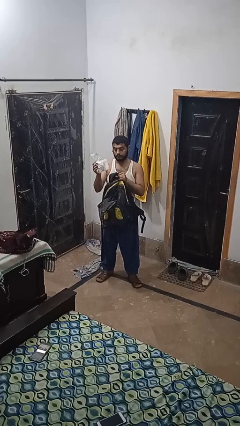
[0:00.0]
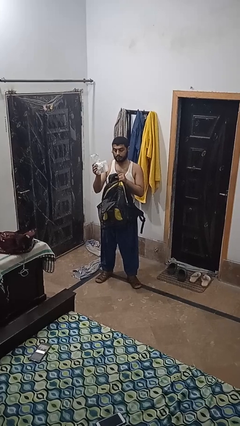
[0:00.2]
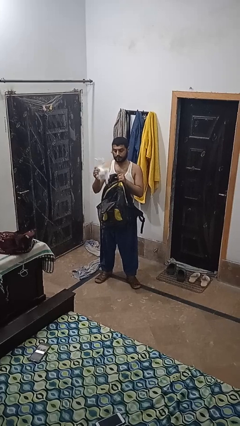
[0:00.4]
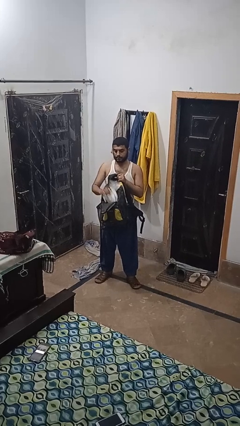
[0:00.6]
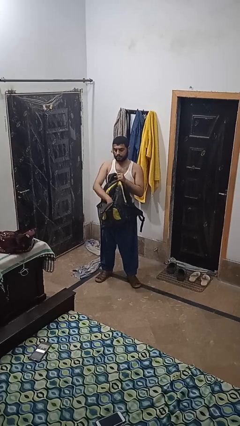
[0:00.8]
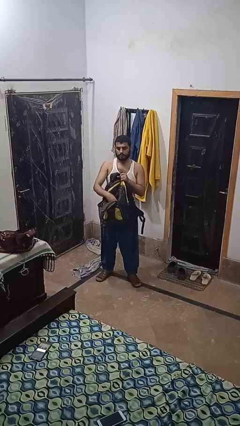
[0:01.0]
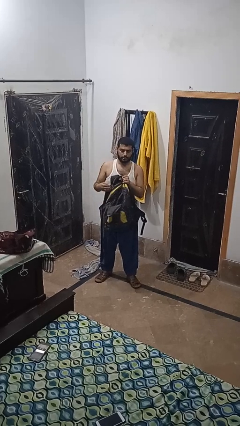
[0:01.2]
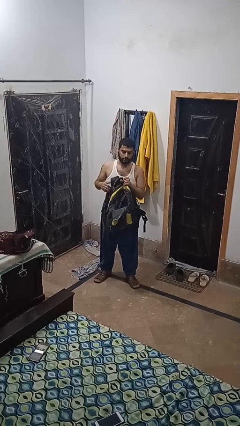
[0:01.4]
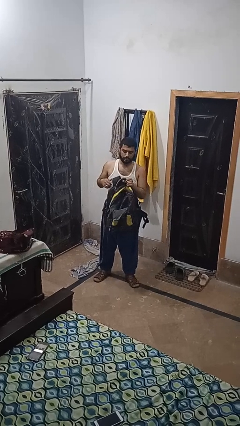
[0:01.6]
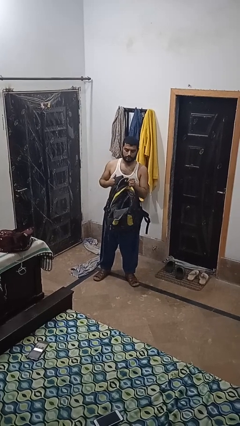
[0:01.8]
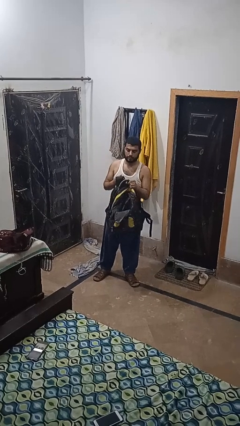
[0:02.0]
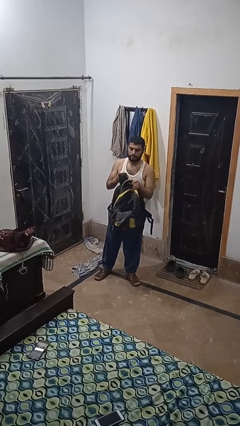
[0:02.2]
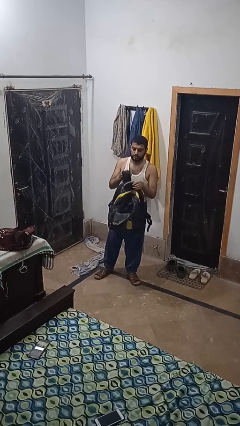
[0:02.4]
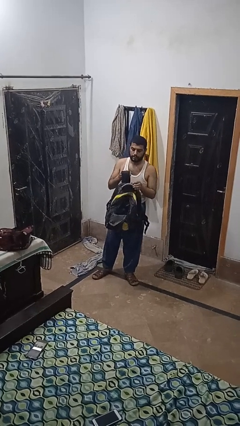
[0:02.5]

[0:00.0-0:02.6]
person puts object into backpack

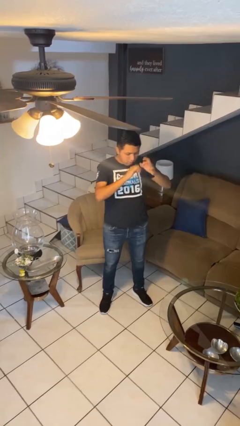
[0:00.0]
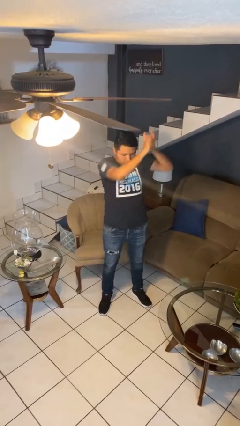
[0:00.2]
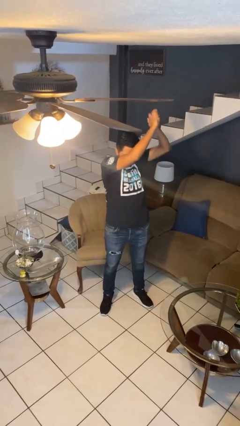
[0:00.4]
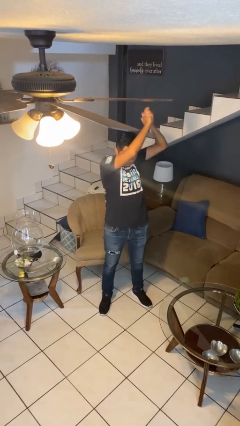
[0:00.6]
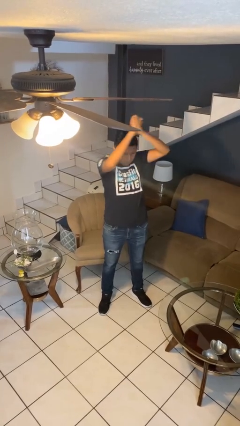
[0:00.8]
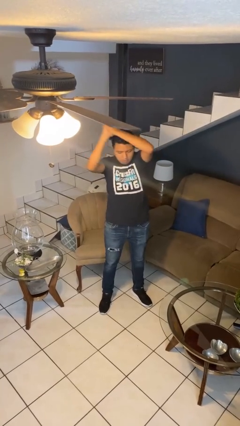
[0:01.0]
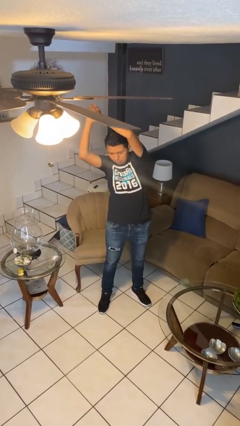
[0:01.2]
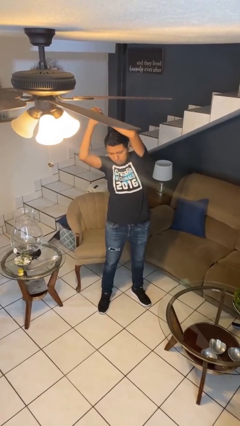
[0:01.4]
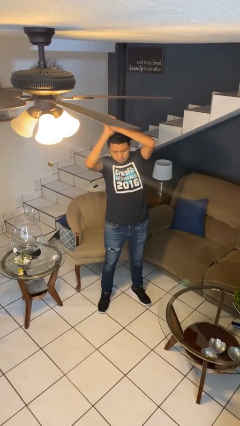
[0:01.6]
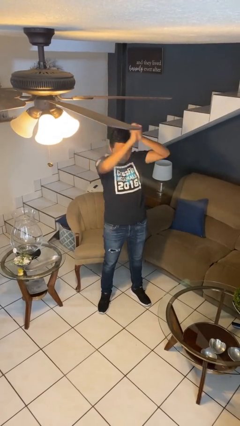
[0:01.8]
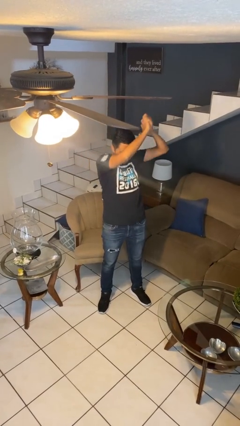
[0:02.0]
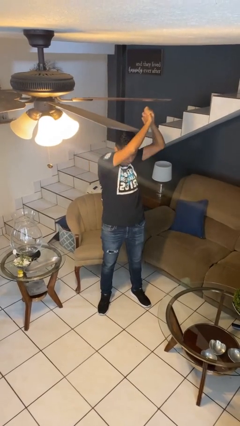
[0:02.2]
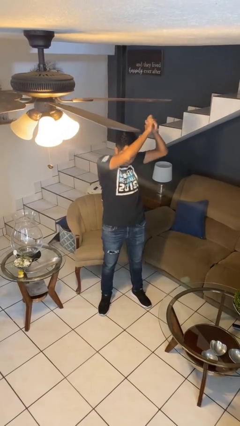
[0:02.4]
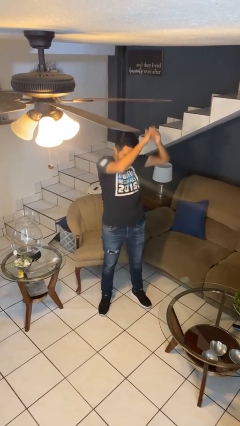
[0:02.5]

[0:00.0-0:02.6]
person stretches arms over head

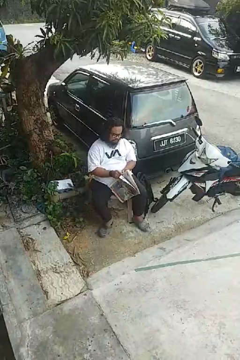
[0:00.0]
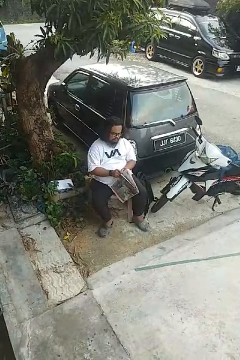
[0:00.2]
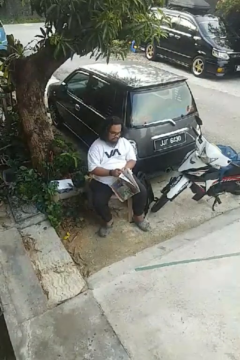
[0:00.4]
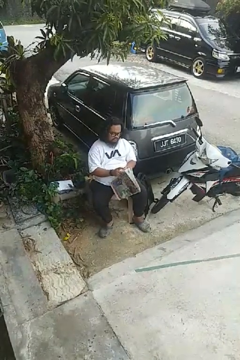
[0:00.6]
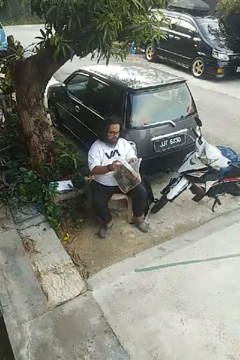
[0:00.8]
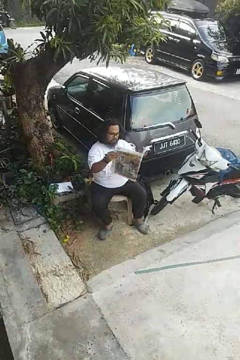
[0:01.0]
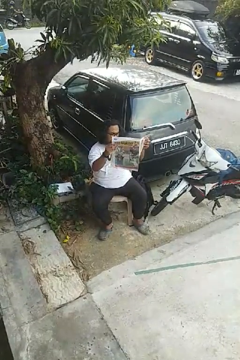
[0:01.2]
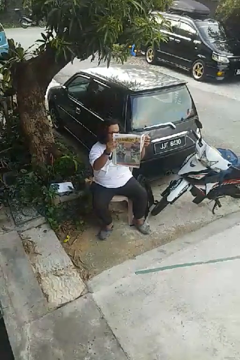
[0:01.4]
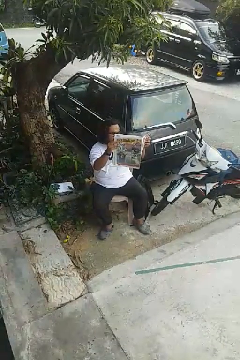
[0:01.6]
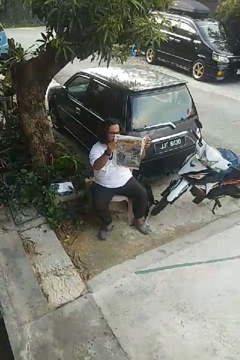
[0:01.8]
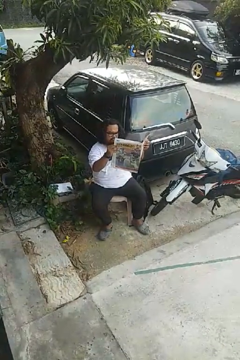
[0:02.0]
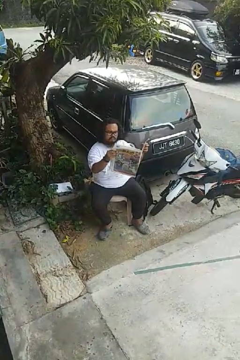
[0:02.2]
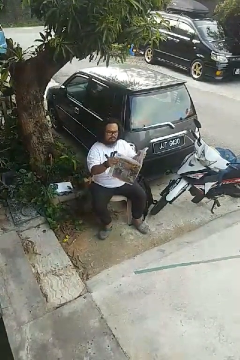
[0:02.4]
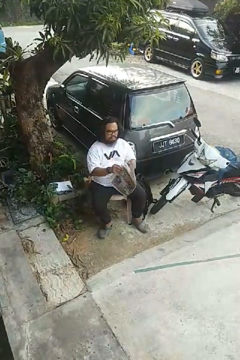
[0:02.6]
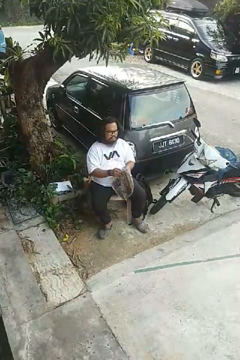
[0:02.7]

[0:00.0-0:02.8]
person reads newspaper

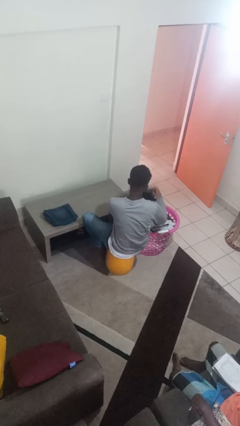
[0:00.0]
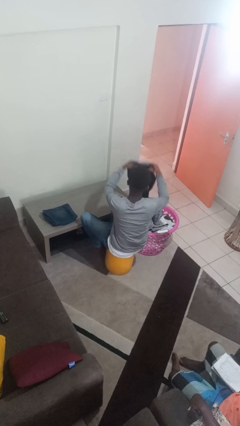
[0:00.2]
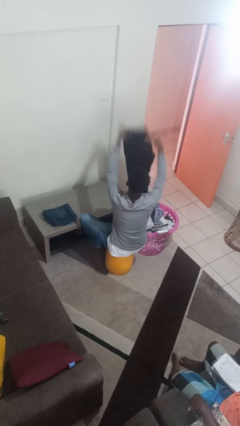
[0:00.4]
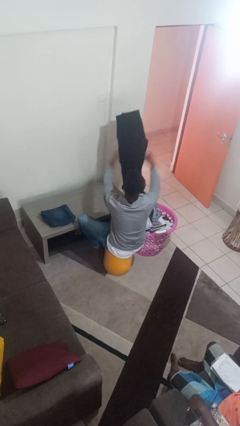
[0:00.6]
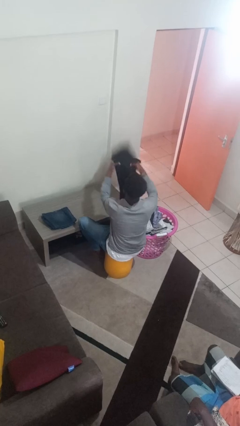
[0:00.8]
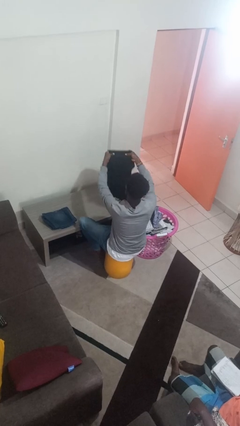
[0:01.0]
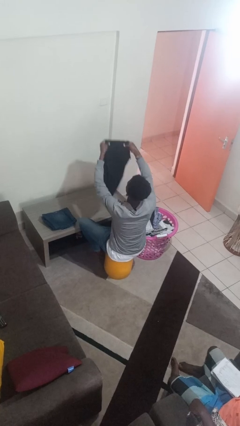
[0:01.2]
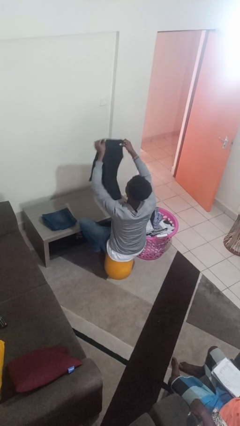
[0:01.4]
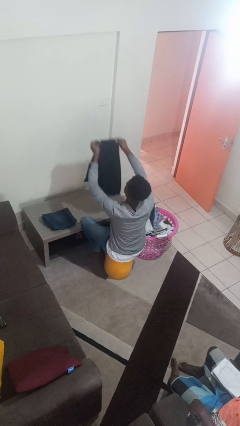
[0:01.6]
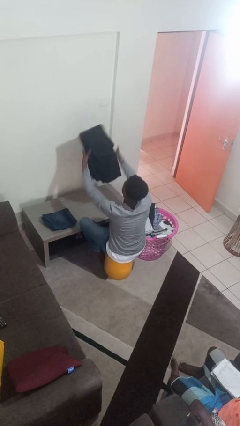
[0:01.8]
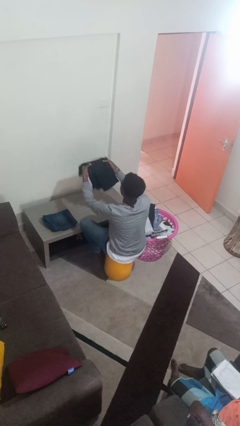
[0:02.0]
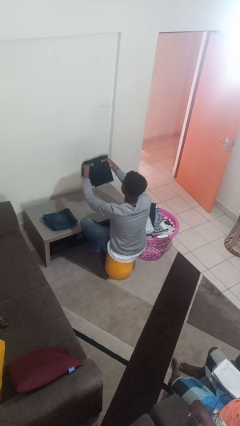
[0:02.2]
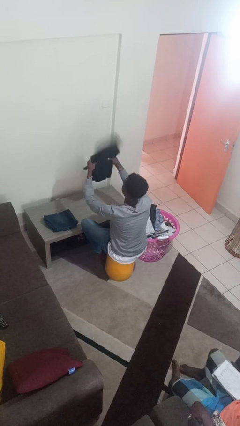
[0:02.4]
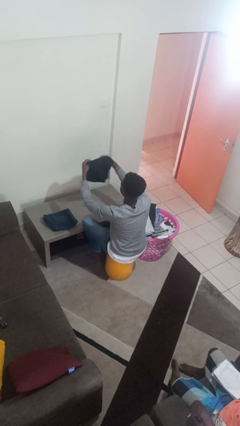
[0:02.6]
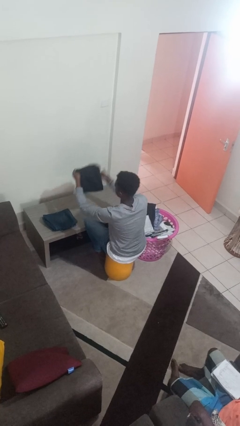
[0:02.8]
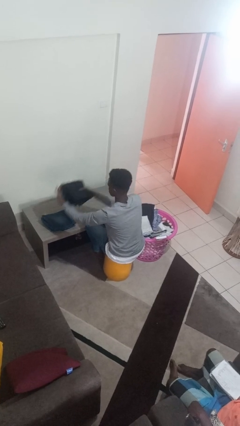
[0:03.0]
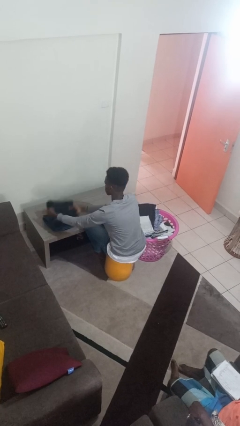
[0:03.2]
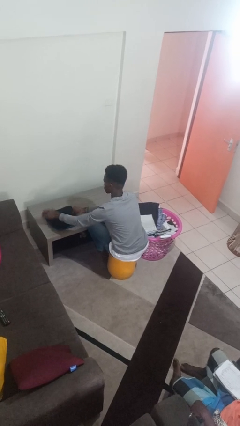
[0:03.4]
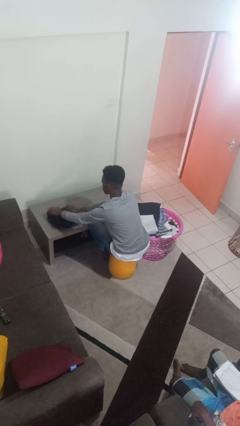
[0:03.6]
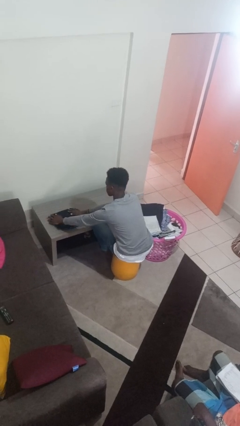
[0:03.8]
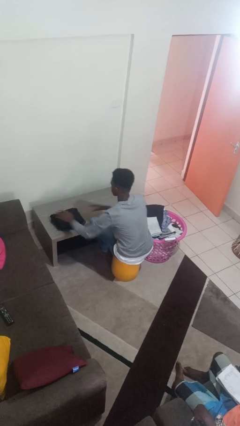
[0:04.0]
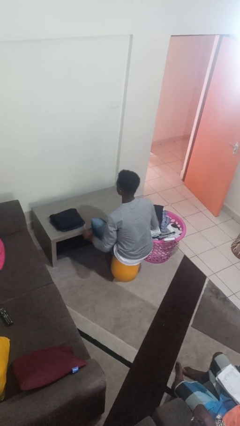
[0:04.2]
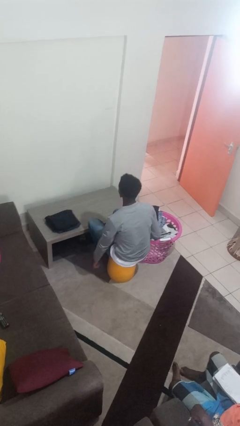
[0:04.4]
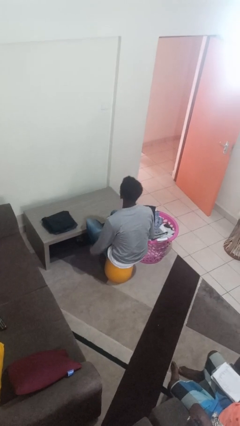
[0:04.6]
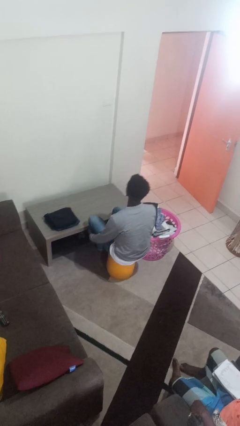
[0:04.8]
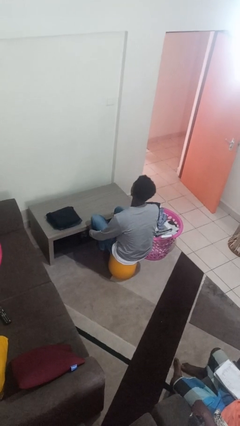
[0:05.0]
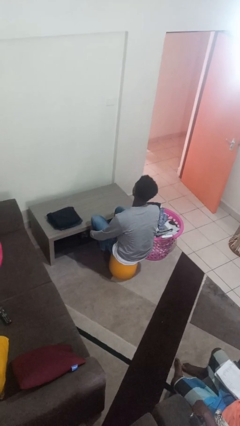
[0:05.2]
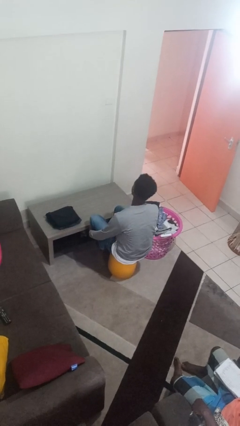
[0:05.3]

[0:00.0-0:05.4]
person folds pants

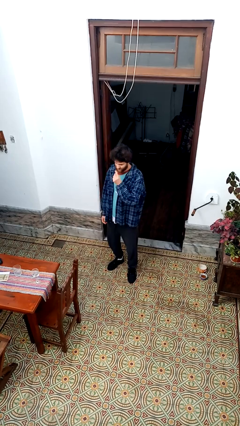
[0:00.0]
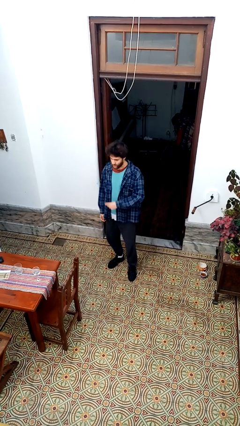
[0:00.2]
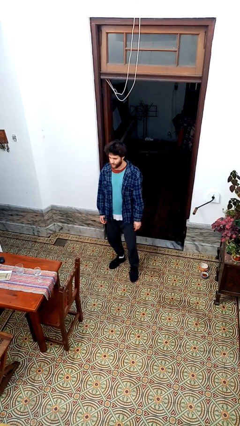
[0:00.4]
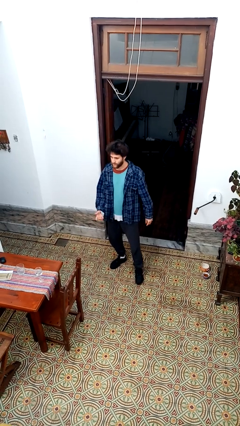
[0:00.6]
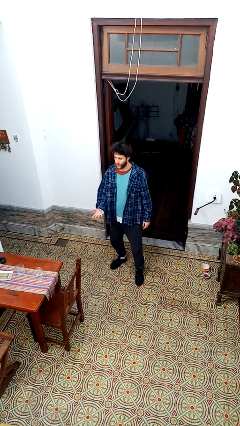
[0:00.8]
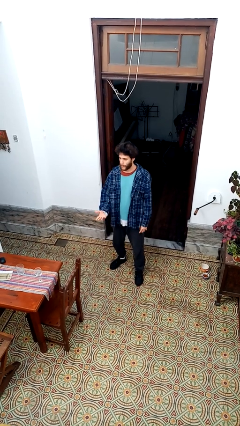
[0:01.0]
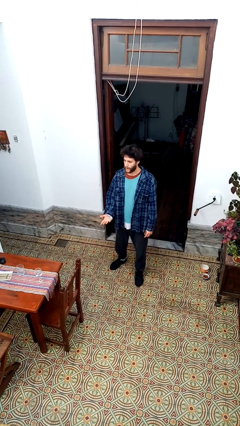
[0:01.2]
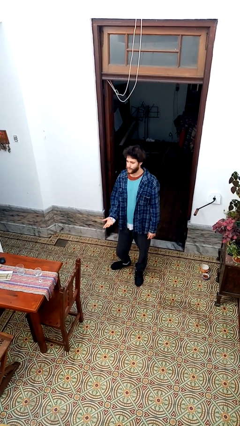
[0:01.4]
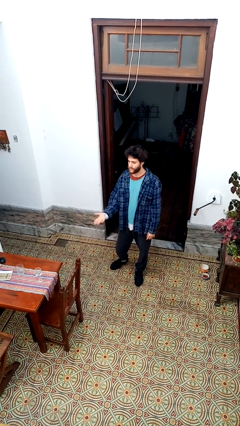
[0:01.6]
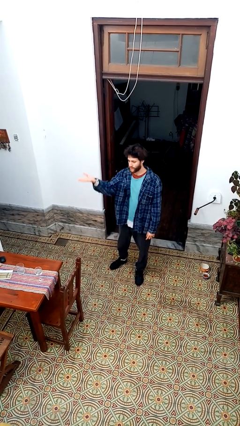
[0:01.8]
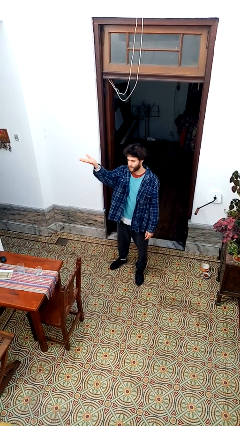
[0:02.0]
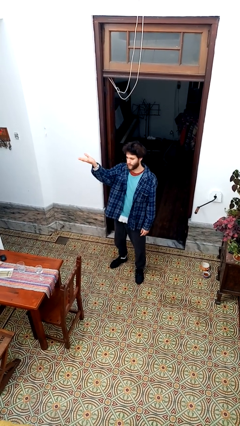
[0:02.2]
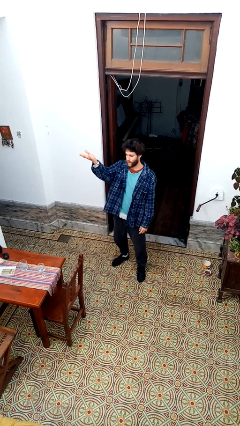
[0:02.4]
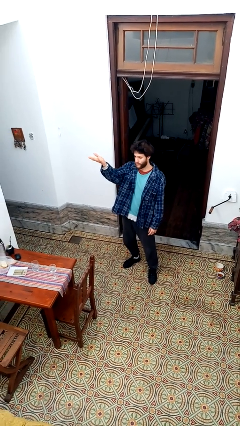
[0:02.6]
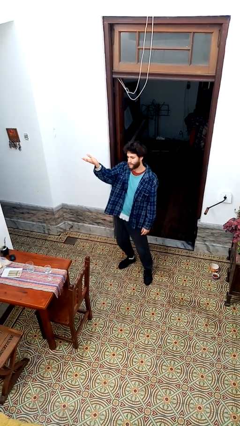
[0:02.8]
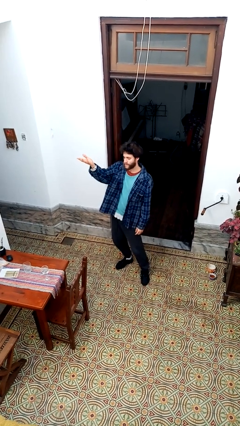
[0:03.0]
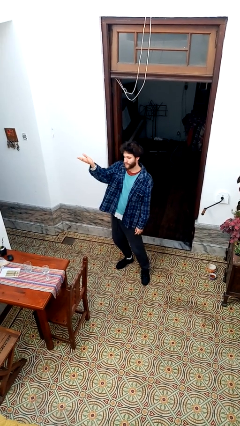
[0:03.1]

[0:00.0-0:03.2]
person gestures swipe up

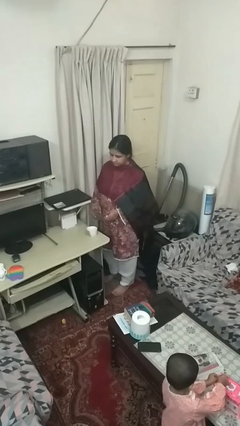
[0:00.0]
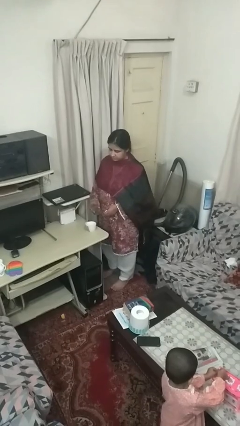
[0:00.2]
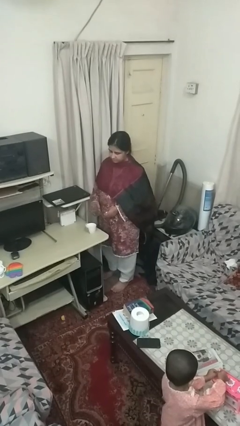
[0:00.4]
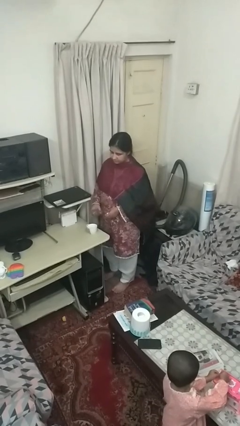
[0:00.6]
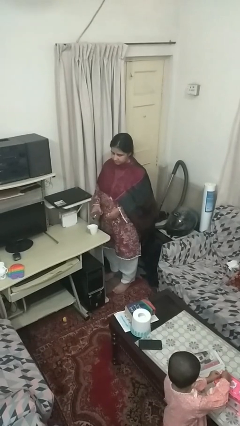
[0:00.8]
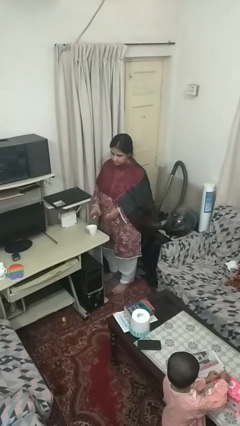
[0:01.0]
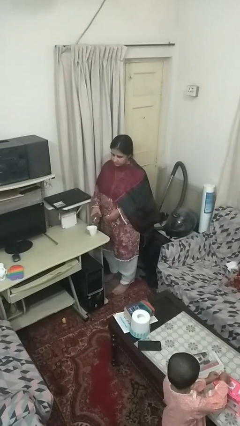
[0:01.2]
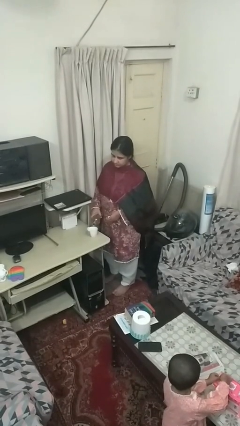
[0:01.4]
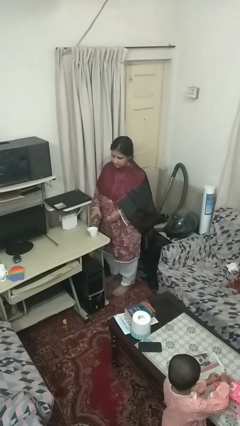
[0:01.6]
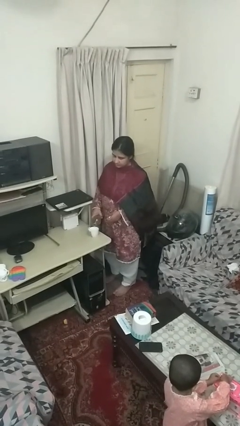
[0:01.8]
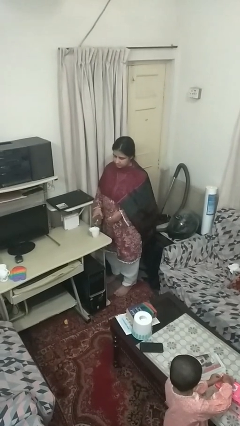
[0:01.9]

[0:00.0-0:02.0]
person pours liquid into cup
